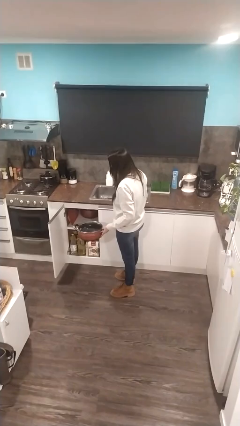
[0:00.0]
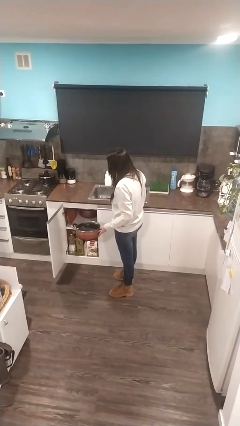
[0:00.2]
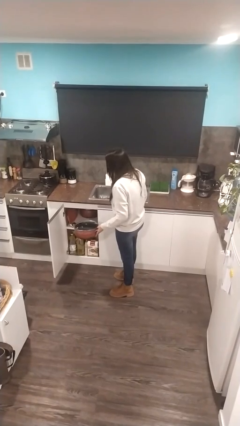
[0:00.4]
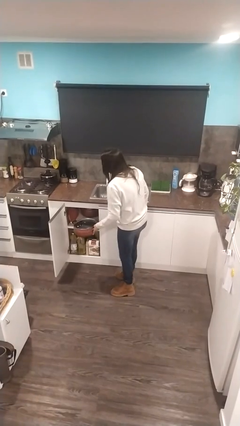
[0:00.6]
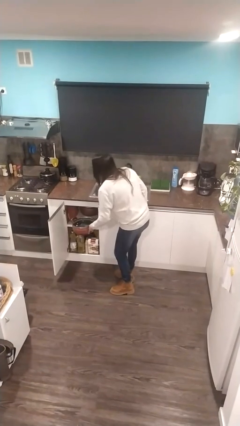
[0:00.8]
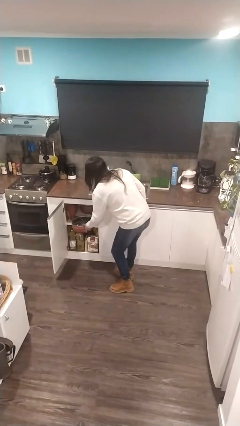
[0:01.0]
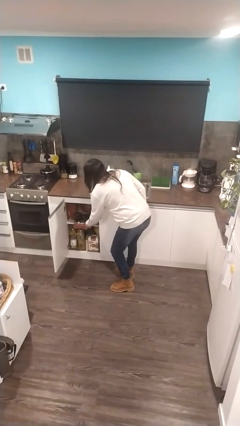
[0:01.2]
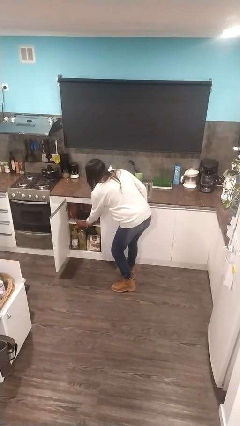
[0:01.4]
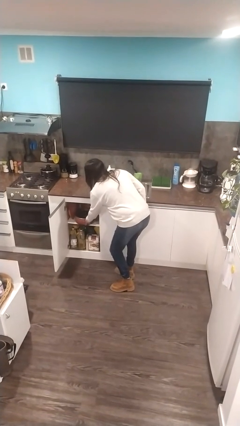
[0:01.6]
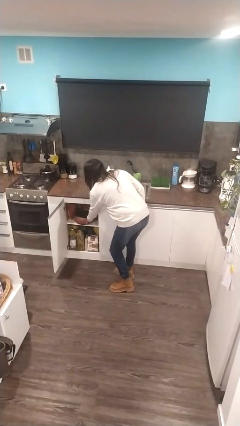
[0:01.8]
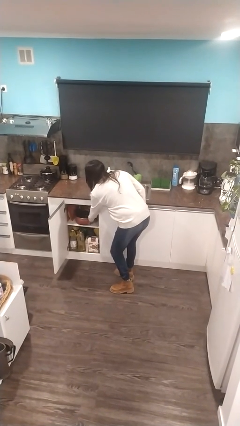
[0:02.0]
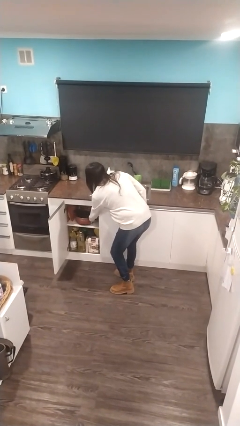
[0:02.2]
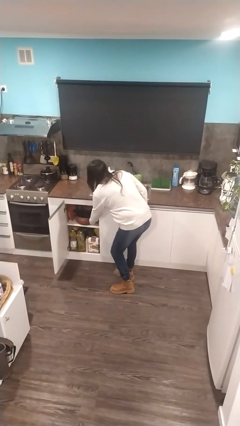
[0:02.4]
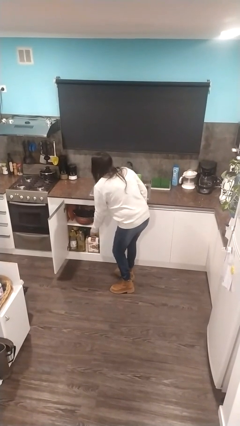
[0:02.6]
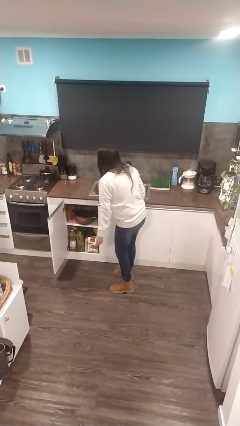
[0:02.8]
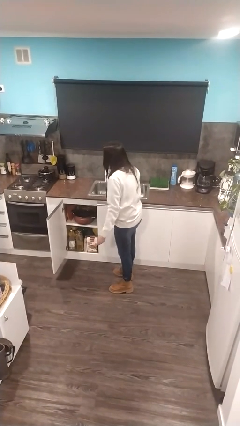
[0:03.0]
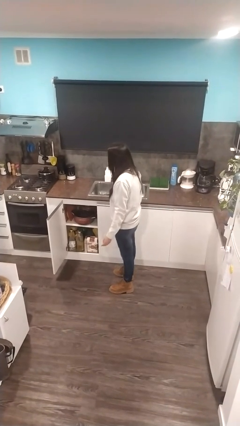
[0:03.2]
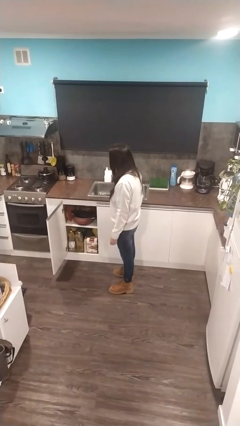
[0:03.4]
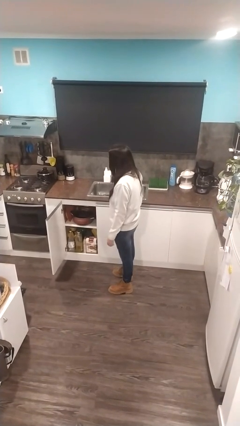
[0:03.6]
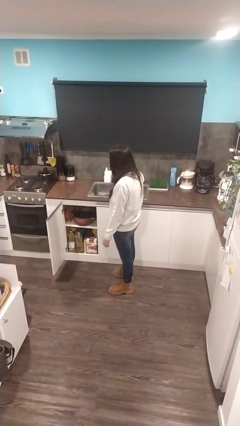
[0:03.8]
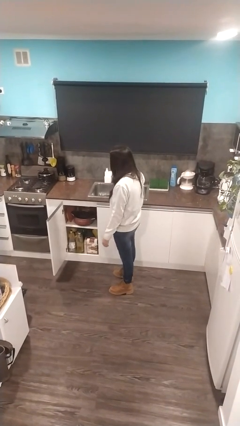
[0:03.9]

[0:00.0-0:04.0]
person puts down object into cabinet

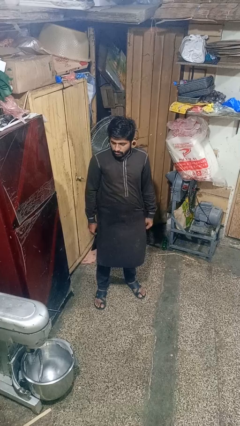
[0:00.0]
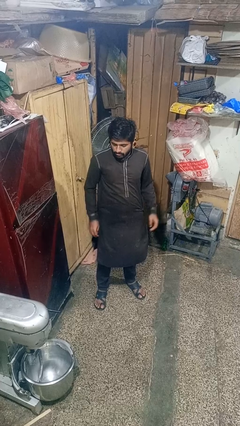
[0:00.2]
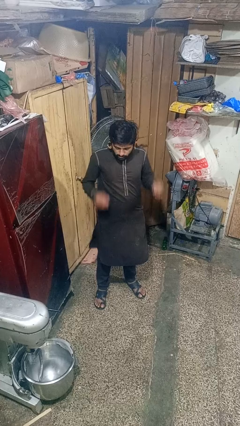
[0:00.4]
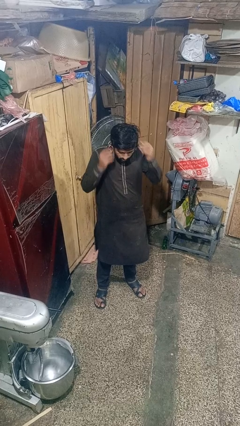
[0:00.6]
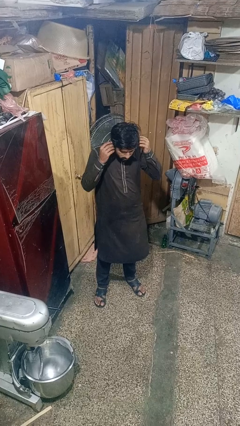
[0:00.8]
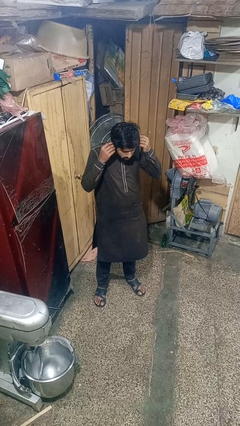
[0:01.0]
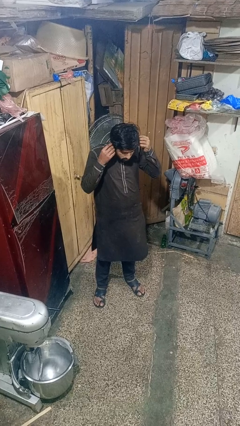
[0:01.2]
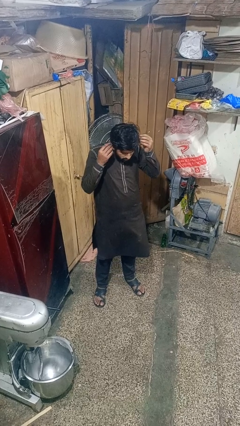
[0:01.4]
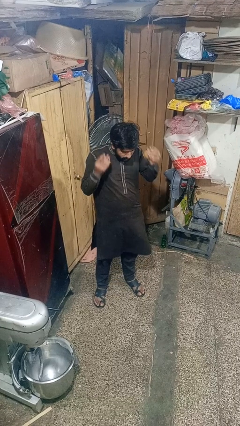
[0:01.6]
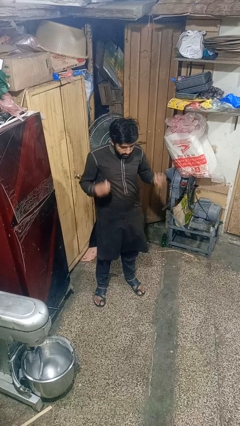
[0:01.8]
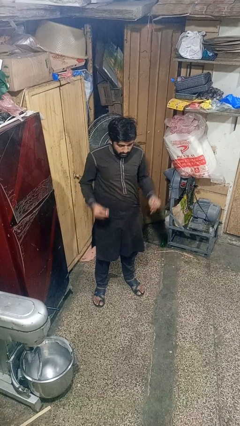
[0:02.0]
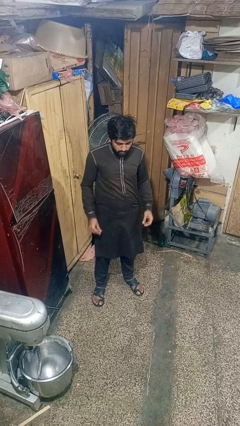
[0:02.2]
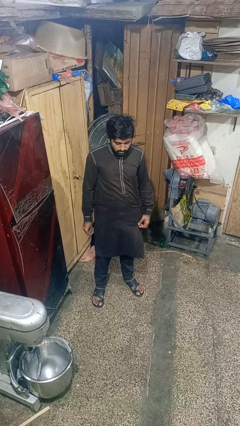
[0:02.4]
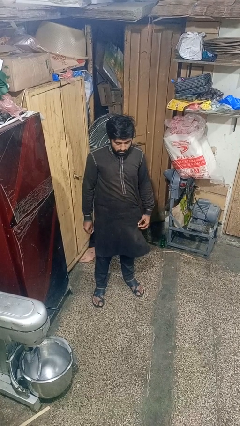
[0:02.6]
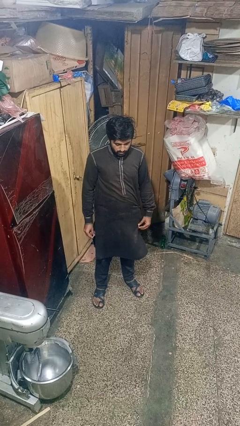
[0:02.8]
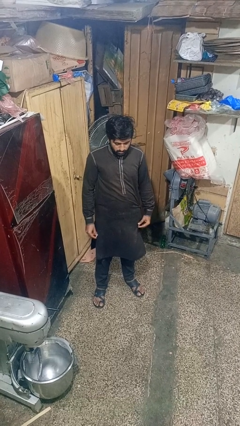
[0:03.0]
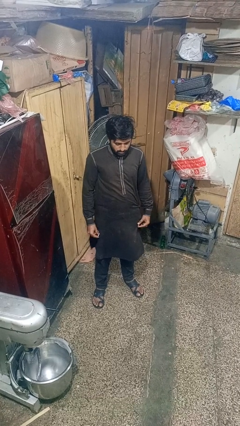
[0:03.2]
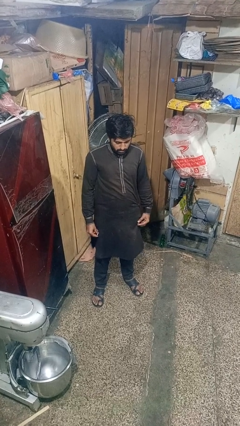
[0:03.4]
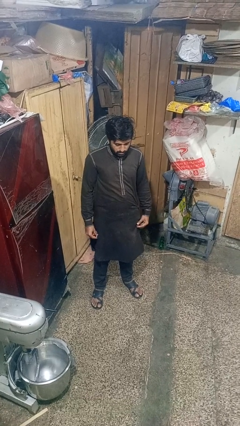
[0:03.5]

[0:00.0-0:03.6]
person takes off earrings

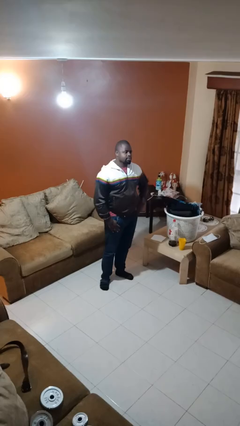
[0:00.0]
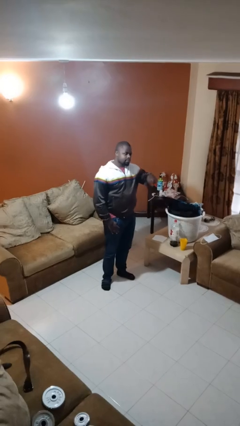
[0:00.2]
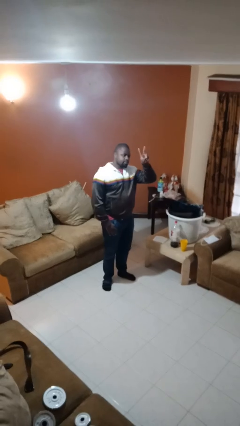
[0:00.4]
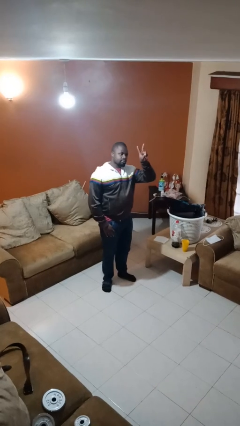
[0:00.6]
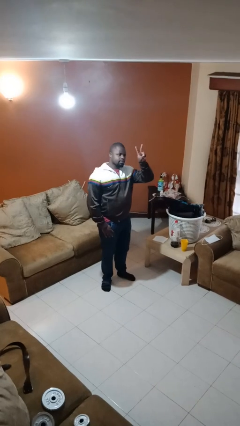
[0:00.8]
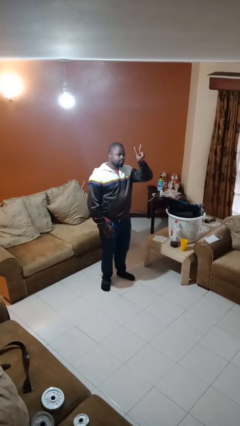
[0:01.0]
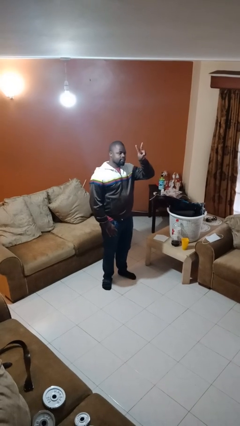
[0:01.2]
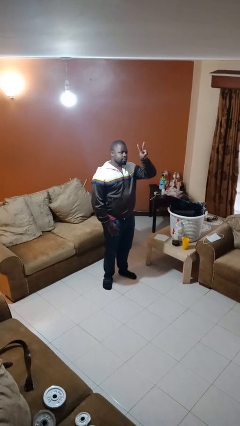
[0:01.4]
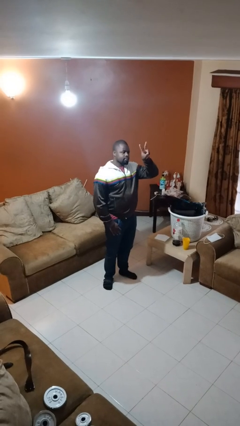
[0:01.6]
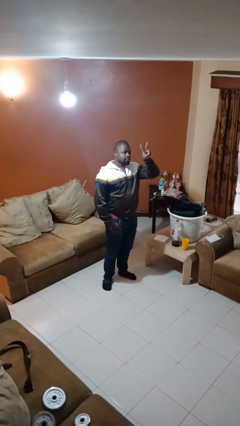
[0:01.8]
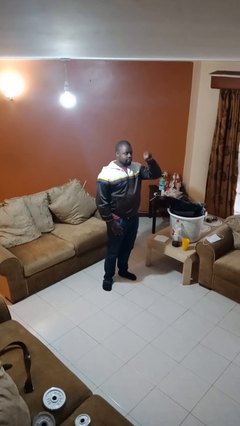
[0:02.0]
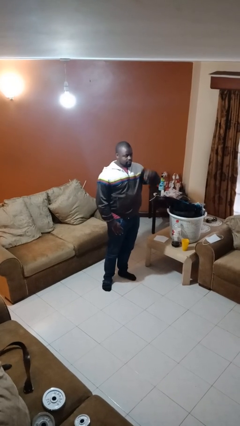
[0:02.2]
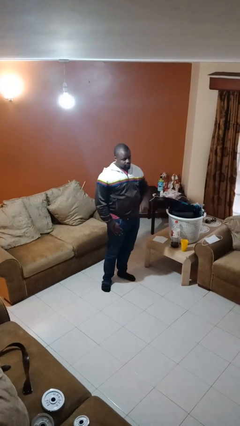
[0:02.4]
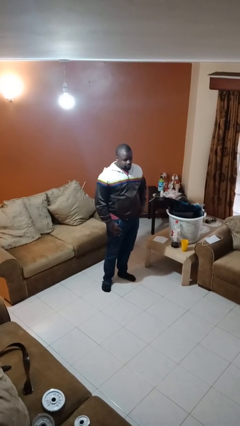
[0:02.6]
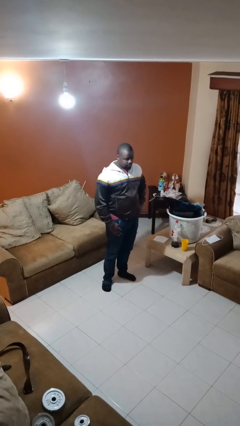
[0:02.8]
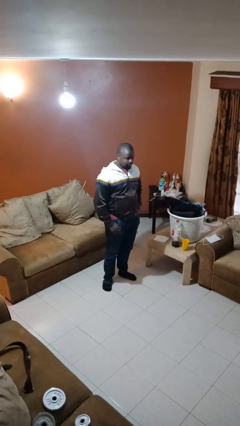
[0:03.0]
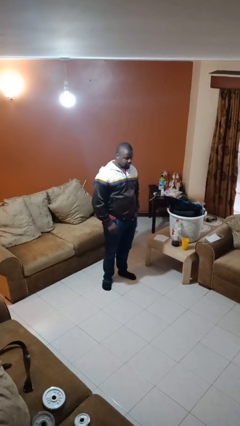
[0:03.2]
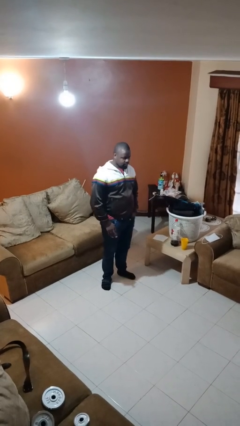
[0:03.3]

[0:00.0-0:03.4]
person gestures peace

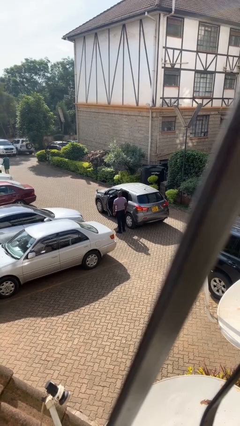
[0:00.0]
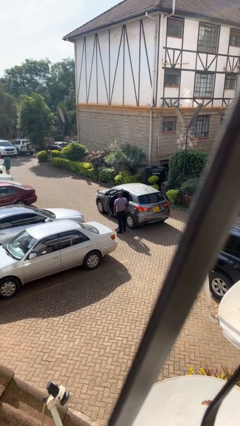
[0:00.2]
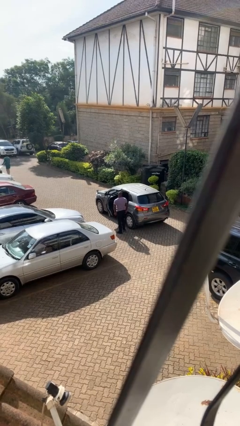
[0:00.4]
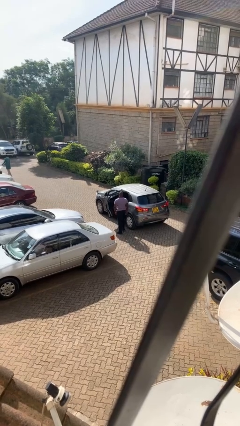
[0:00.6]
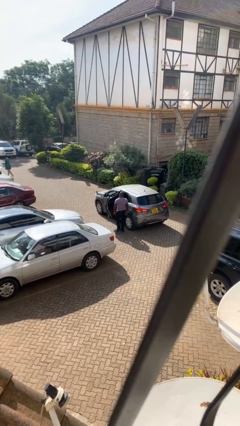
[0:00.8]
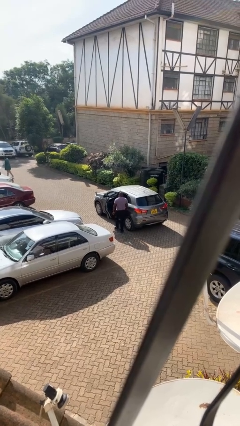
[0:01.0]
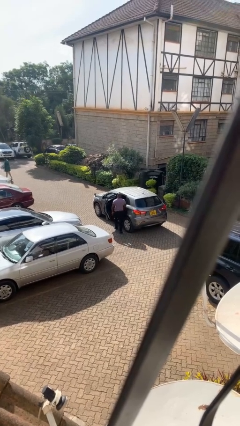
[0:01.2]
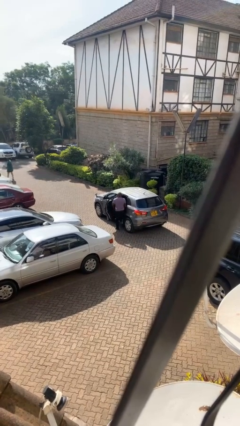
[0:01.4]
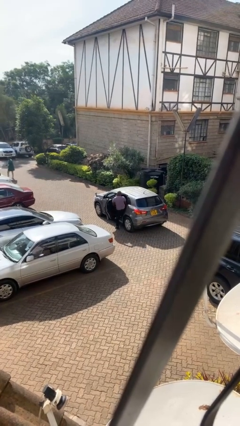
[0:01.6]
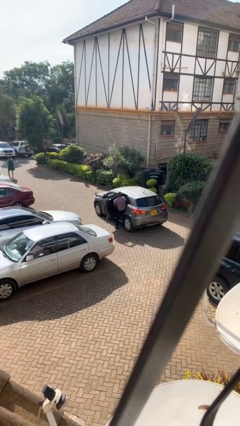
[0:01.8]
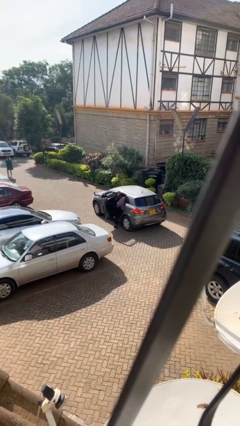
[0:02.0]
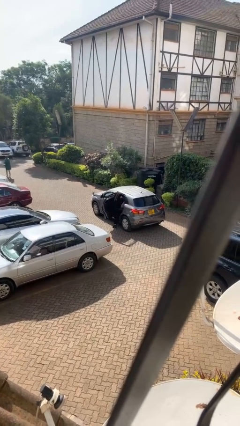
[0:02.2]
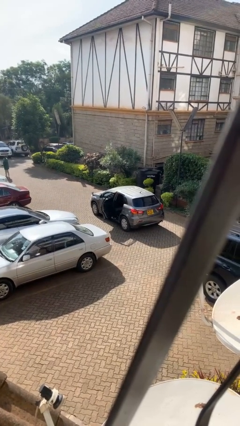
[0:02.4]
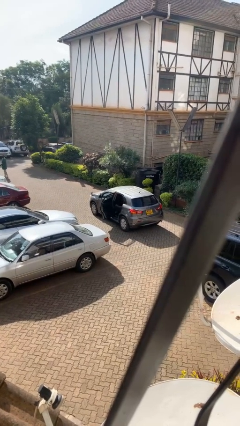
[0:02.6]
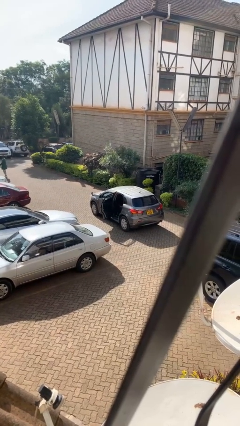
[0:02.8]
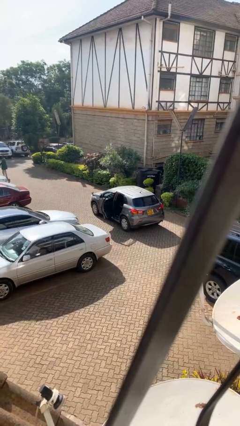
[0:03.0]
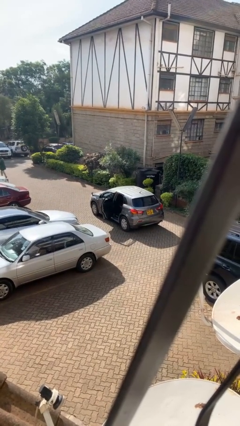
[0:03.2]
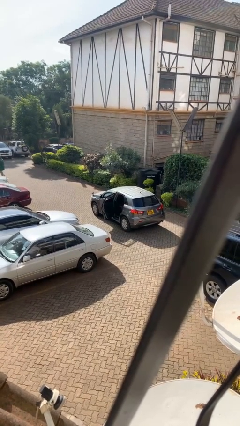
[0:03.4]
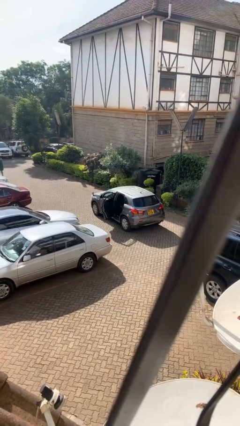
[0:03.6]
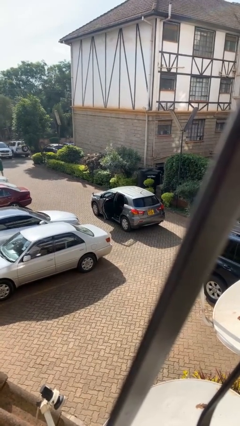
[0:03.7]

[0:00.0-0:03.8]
person enters car

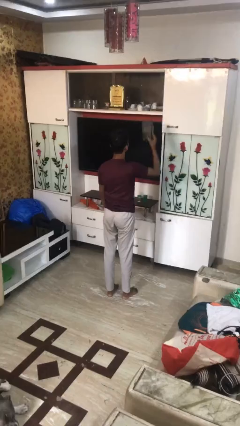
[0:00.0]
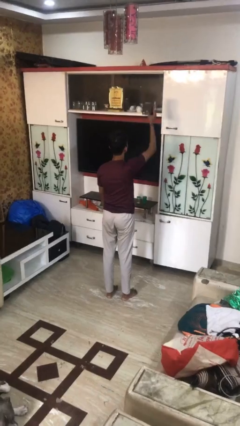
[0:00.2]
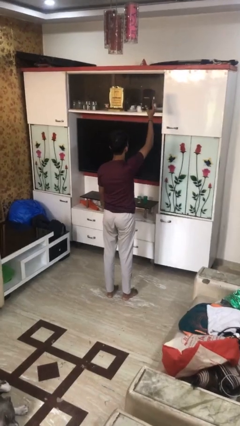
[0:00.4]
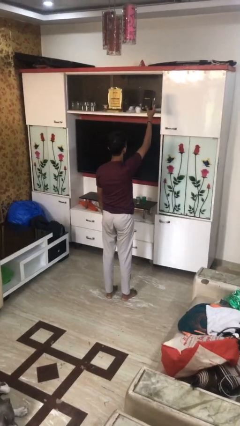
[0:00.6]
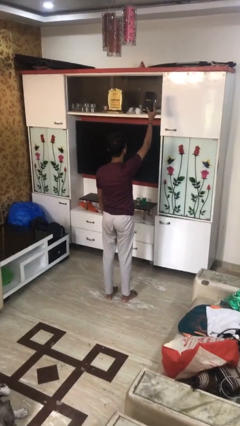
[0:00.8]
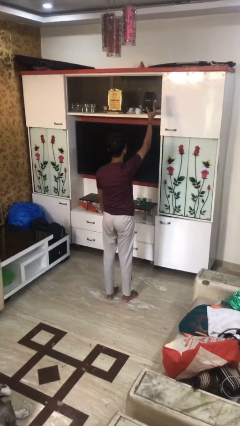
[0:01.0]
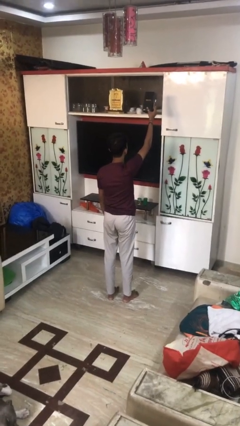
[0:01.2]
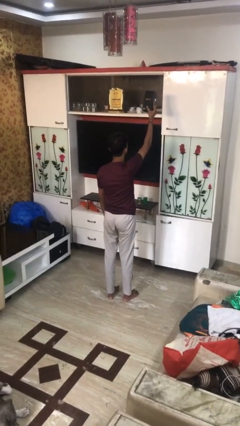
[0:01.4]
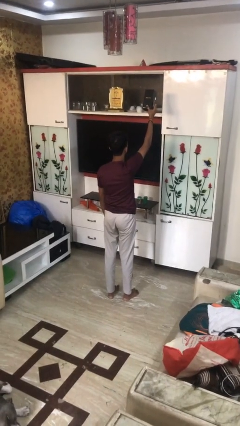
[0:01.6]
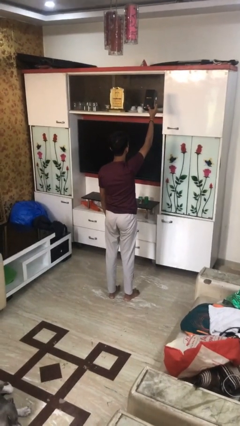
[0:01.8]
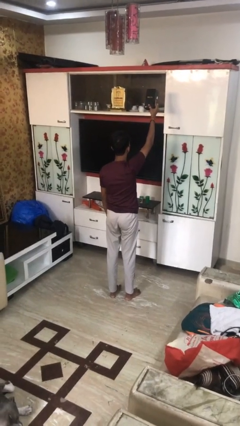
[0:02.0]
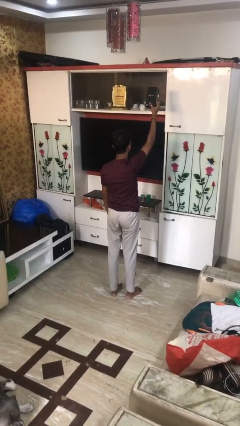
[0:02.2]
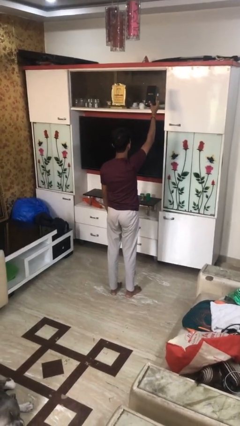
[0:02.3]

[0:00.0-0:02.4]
person holds object above head

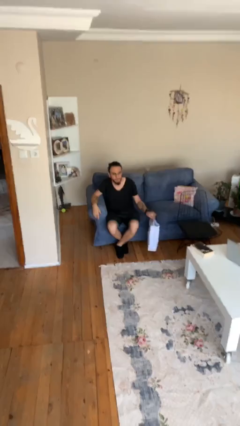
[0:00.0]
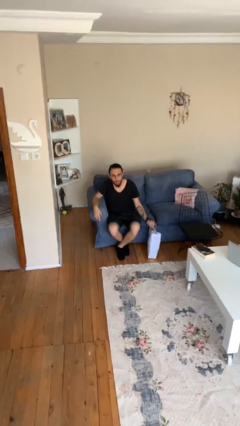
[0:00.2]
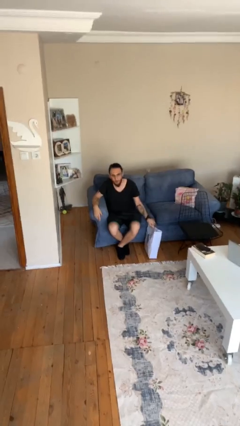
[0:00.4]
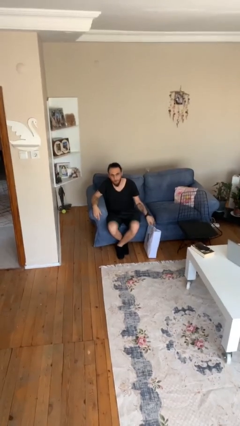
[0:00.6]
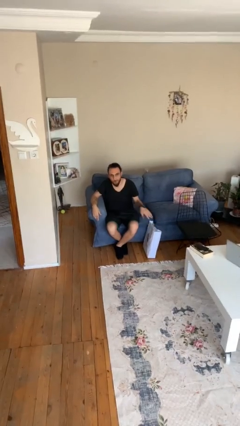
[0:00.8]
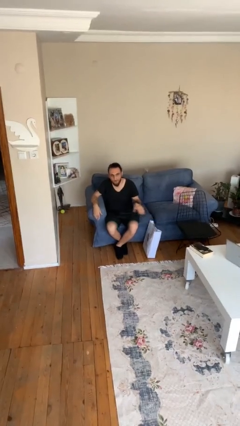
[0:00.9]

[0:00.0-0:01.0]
person puts down object on floor
